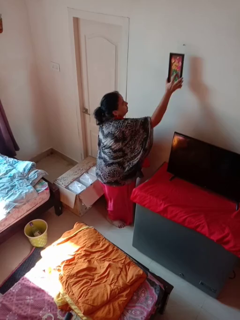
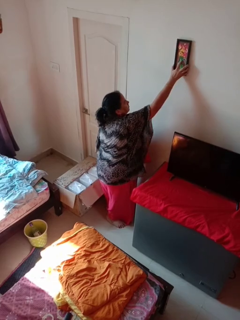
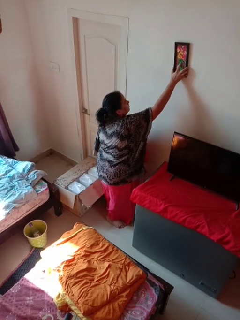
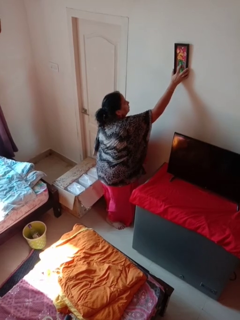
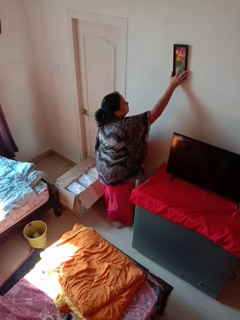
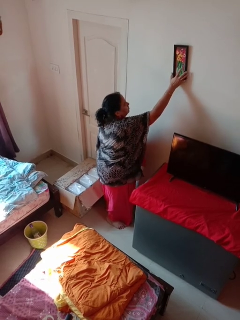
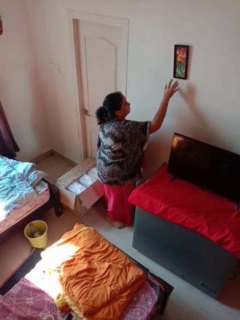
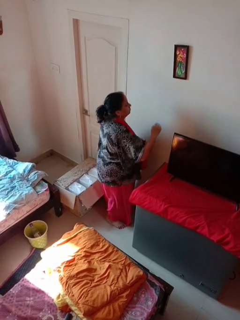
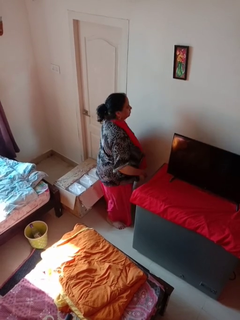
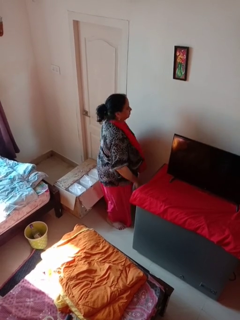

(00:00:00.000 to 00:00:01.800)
person puts up picture frame

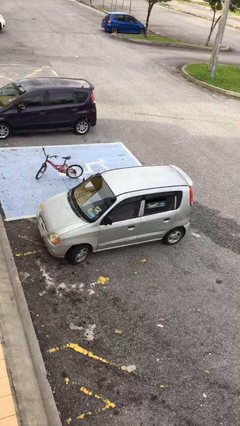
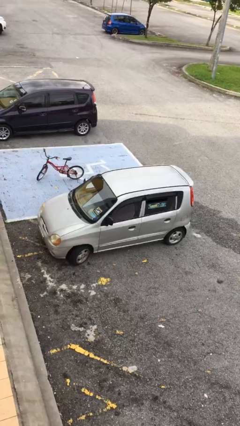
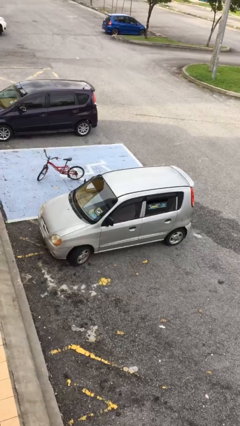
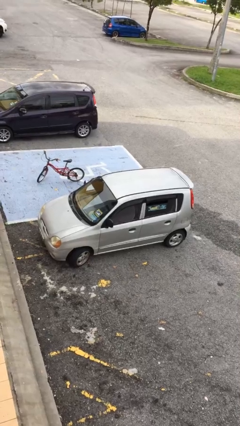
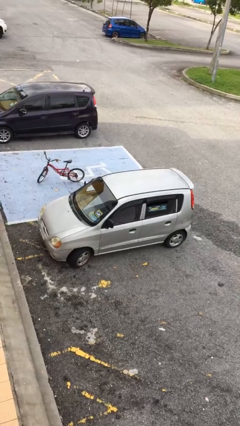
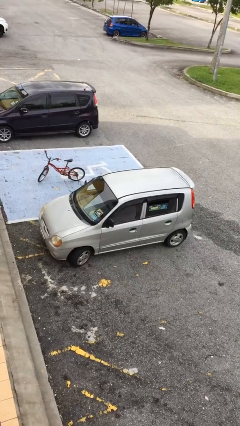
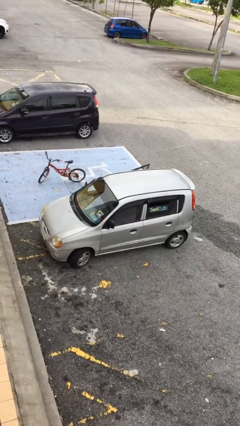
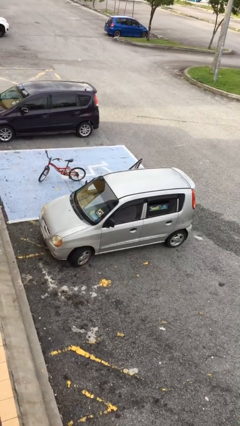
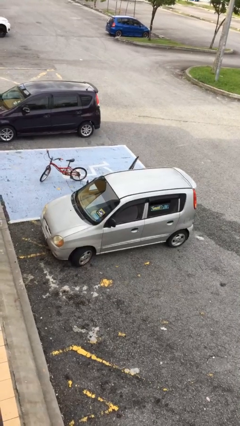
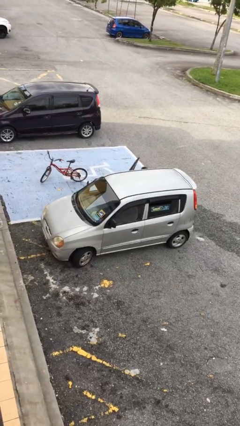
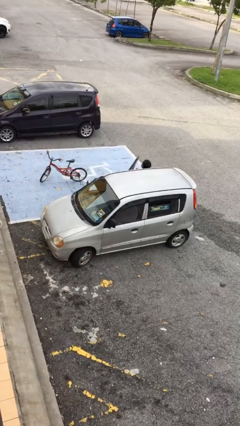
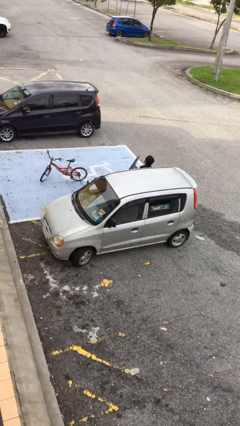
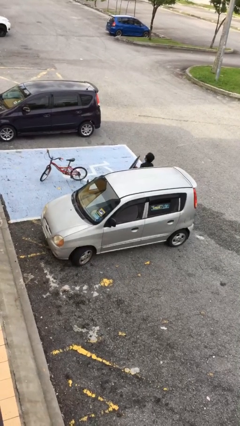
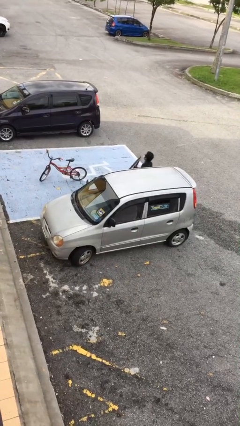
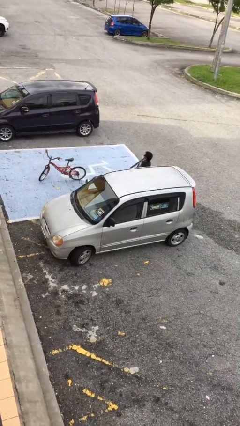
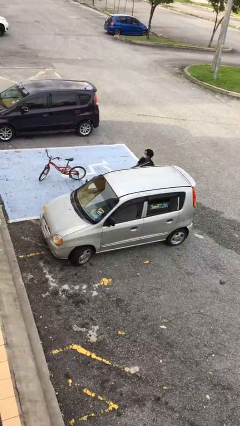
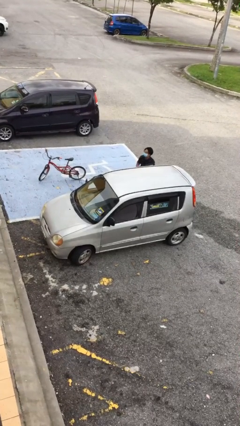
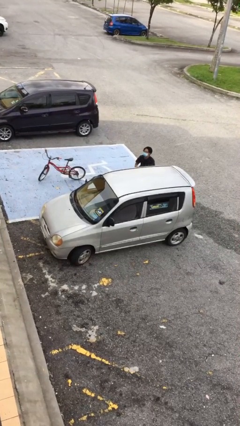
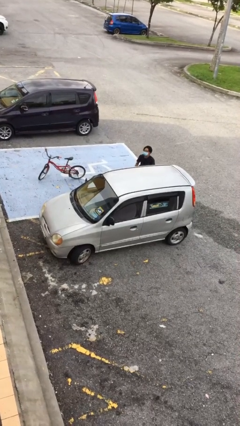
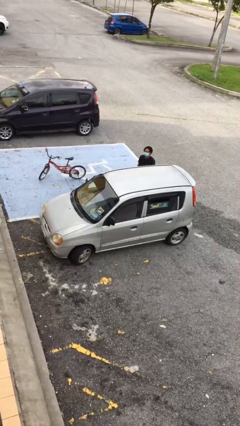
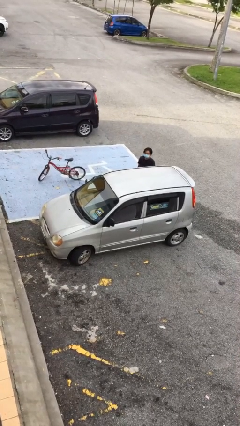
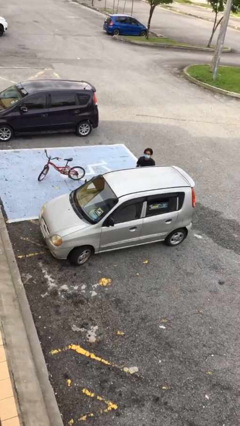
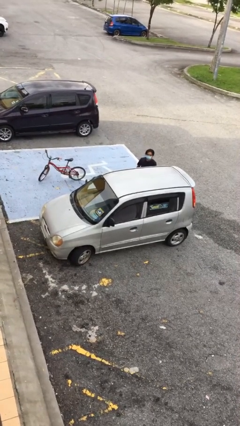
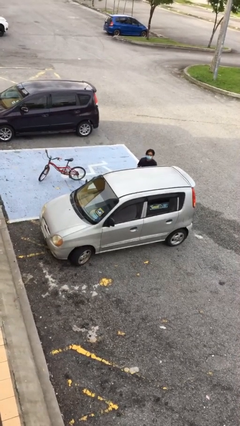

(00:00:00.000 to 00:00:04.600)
car drops off person

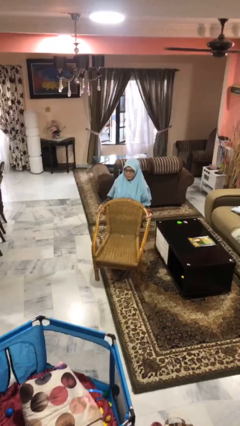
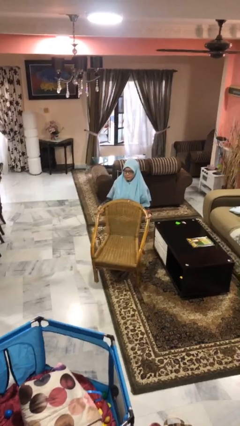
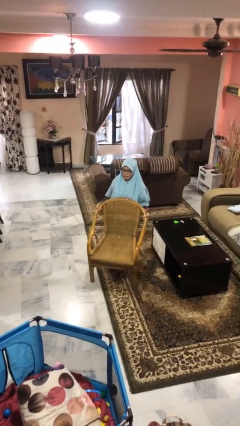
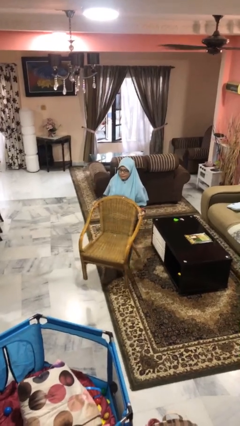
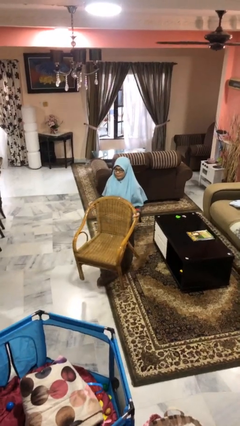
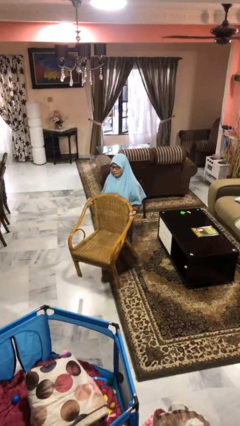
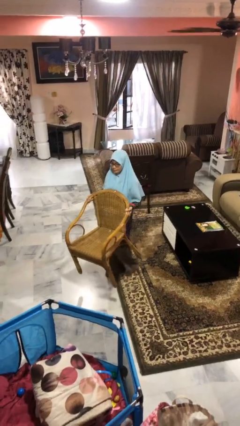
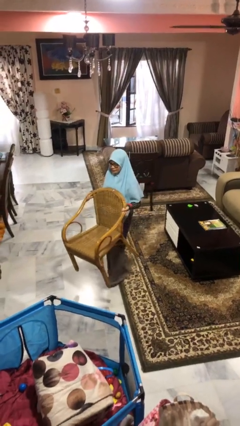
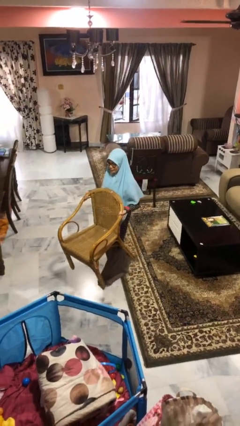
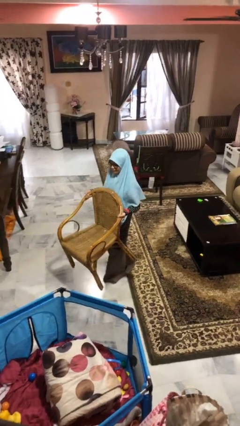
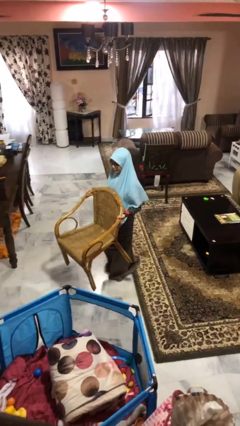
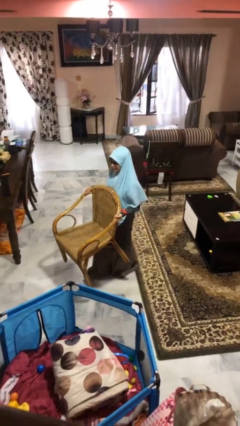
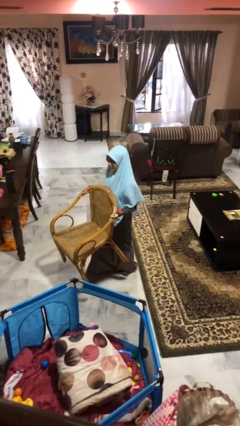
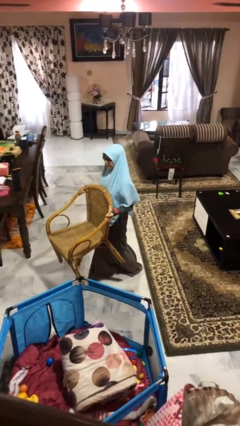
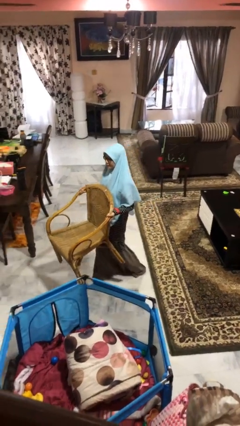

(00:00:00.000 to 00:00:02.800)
person carries furniture

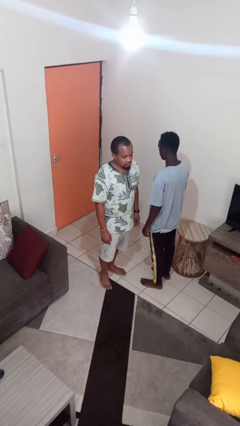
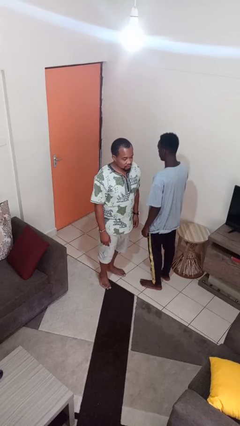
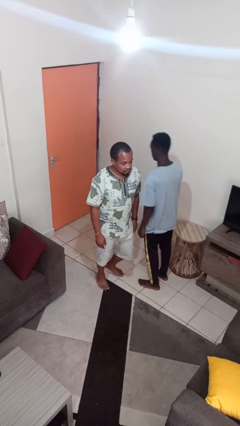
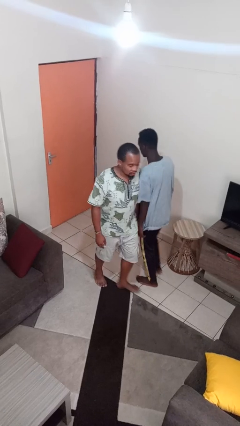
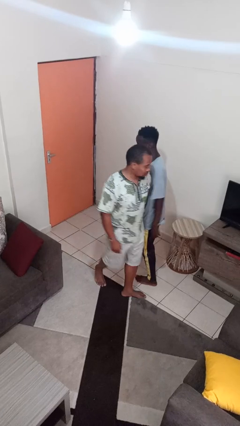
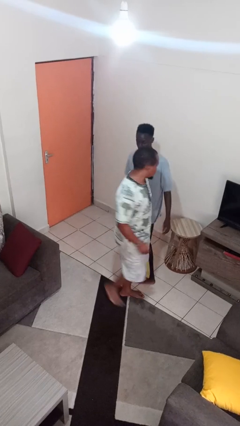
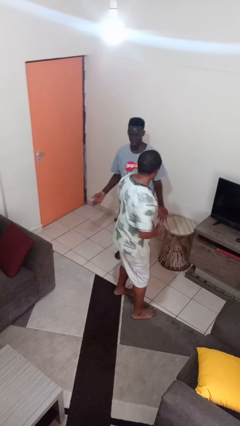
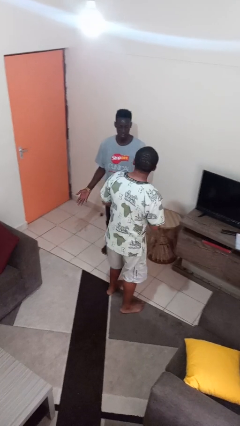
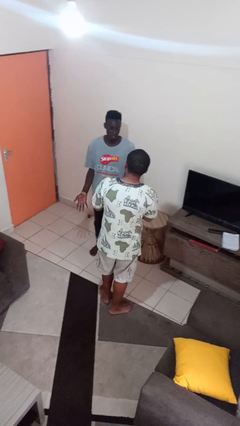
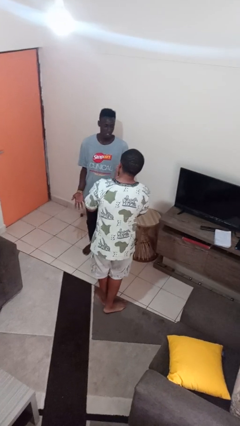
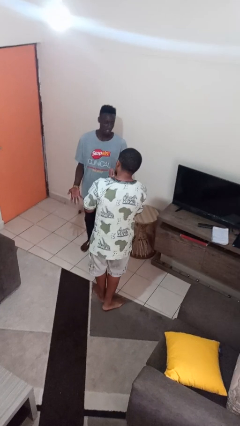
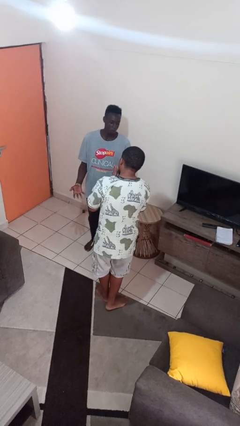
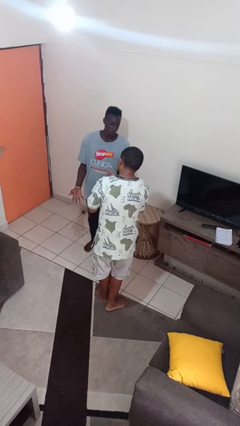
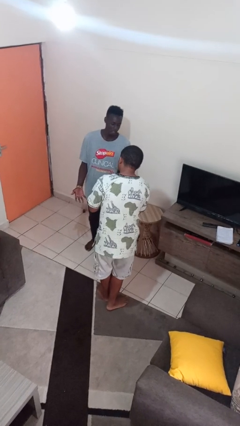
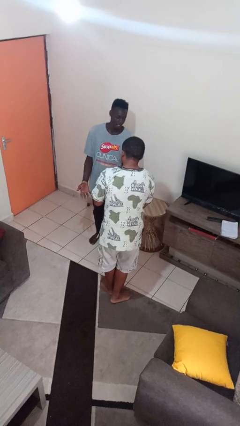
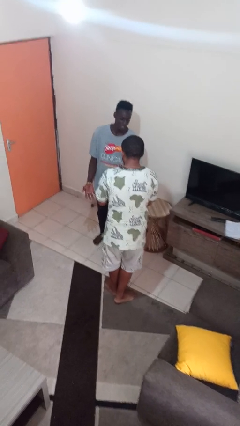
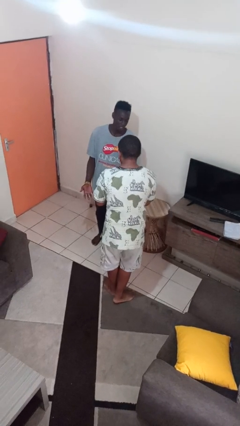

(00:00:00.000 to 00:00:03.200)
person bumps into person

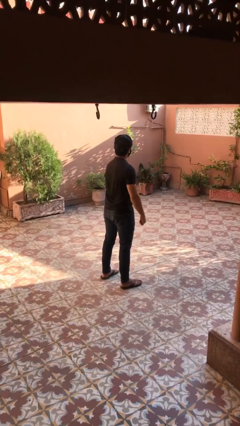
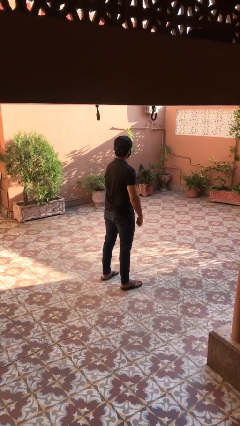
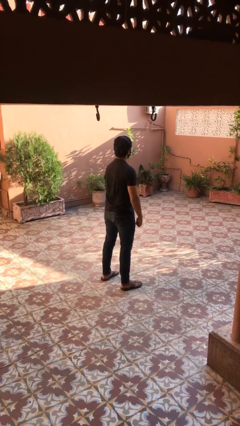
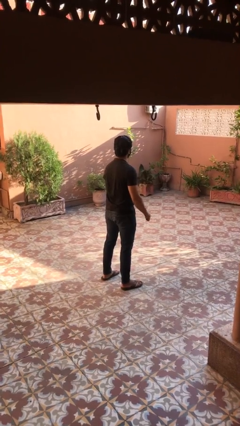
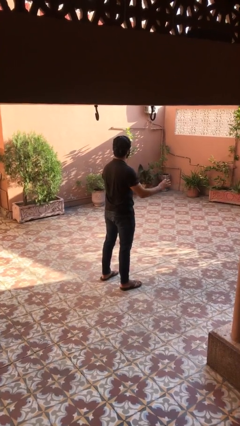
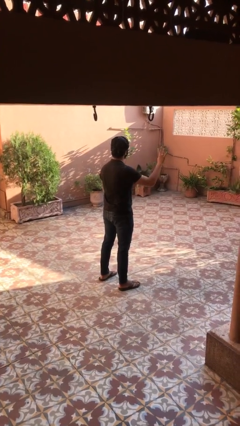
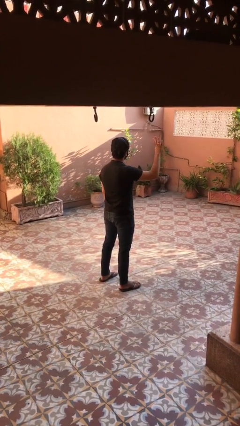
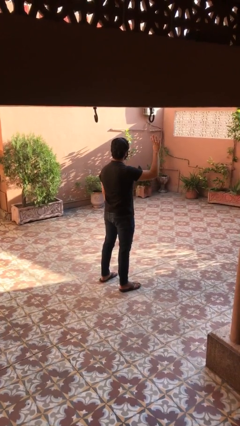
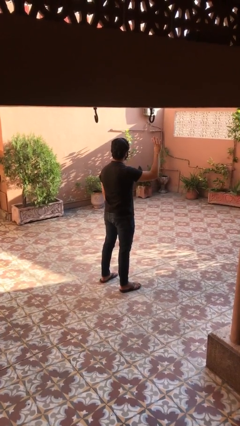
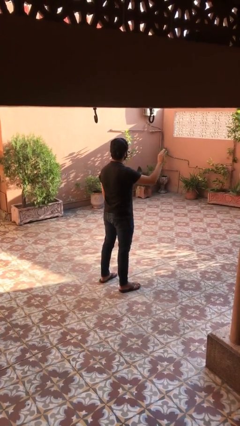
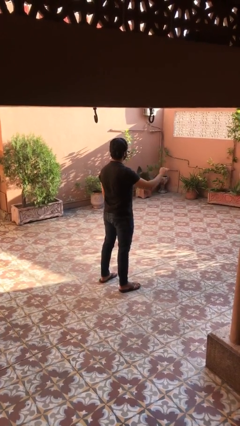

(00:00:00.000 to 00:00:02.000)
person gestures number four

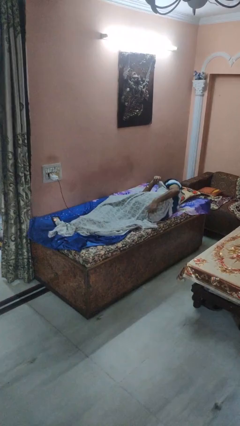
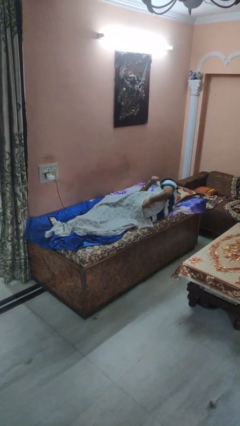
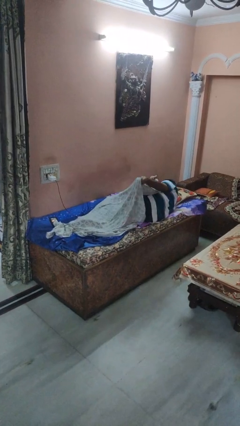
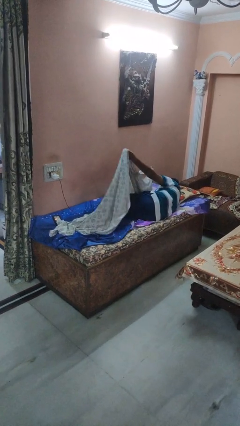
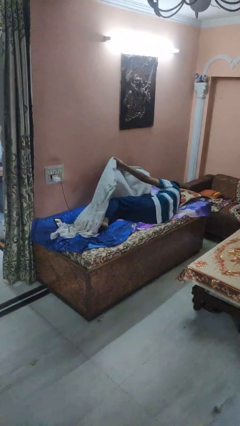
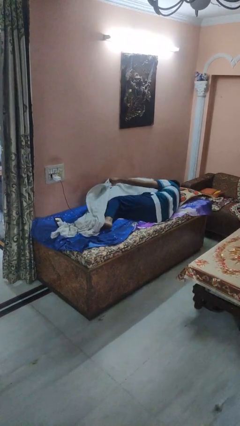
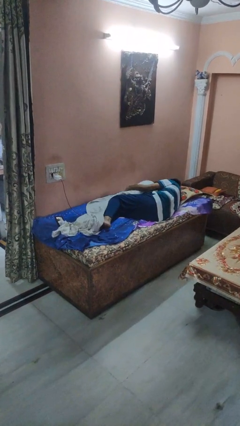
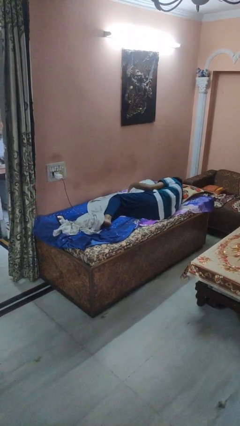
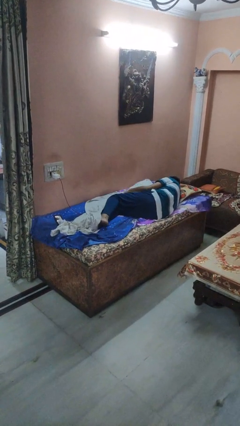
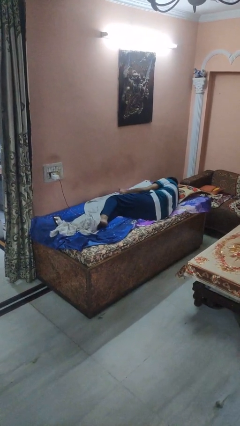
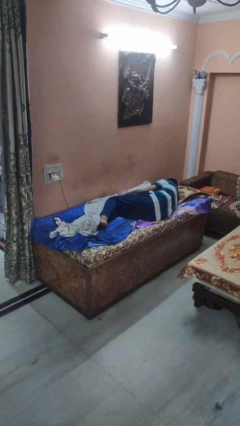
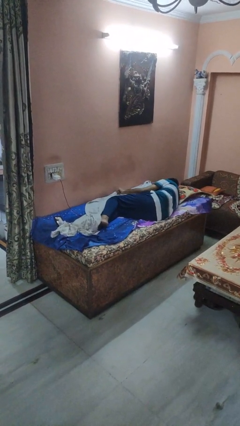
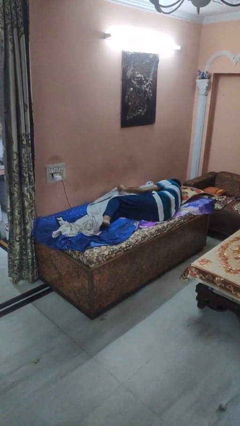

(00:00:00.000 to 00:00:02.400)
person uncovers with bedsheets

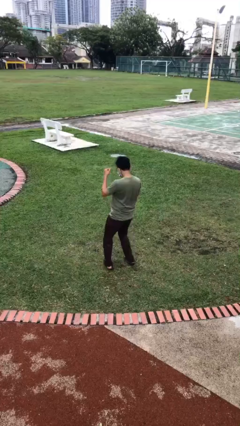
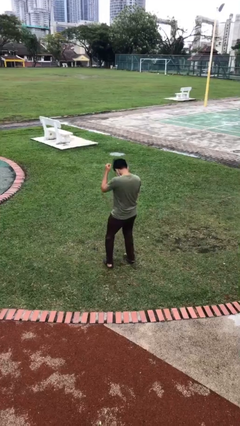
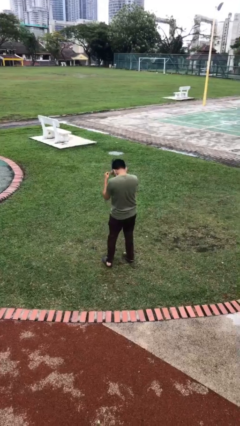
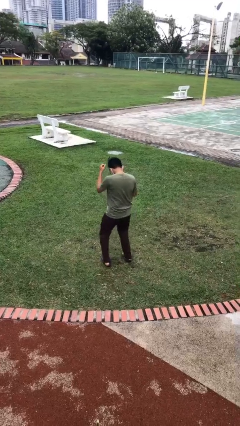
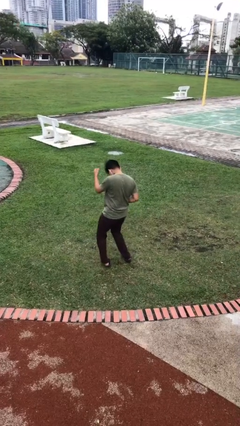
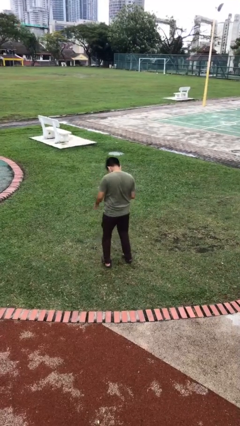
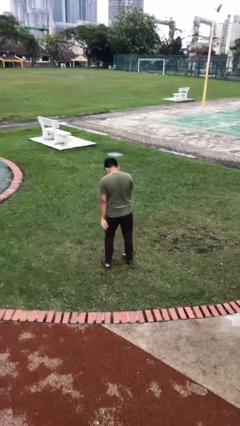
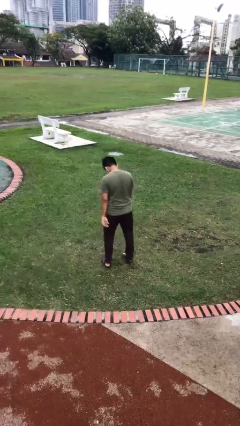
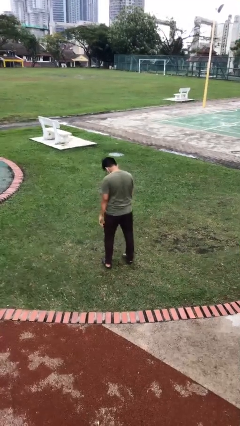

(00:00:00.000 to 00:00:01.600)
person dances in place
